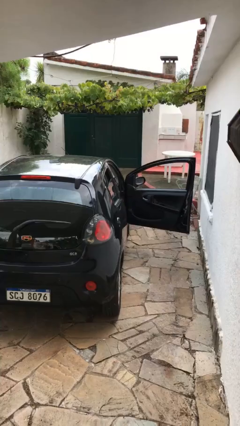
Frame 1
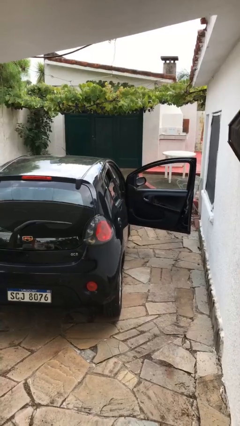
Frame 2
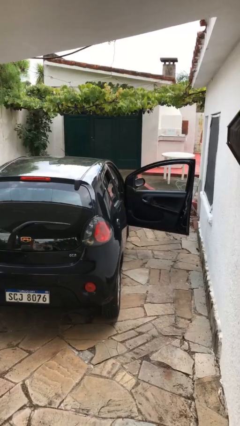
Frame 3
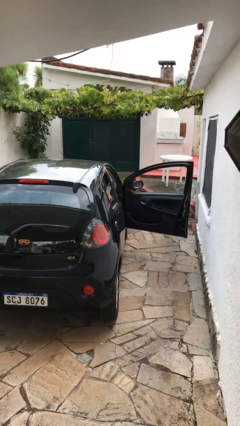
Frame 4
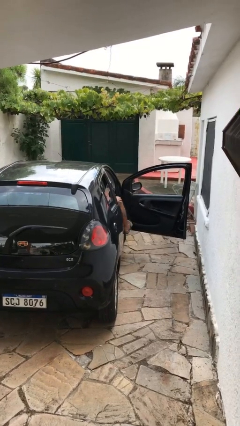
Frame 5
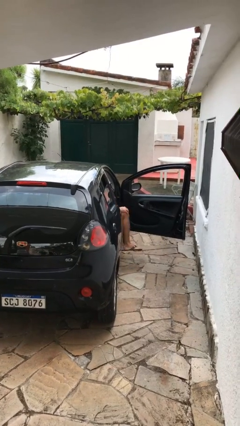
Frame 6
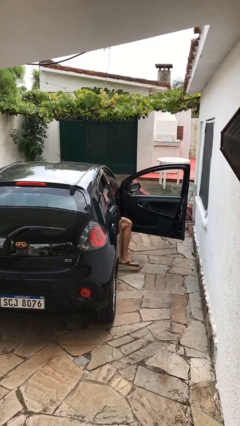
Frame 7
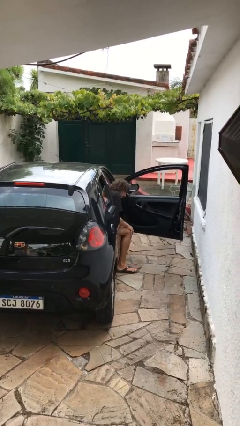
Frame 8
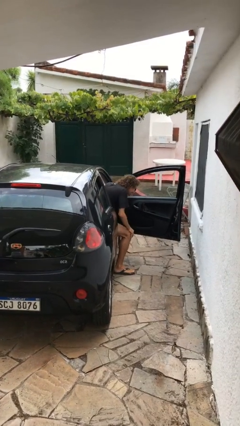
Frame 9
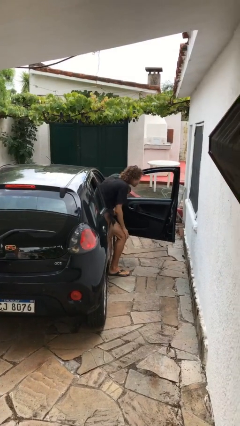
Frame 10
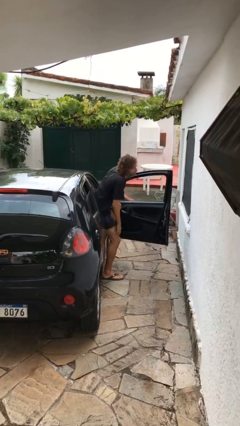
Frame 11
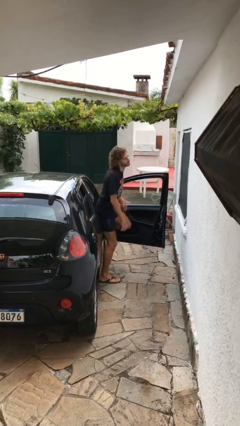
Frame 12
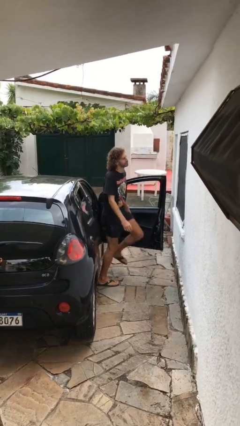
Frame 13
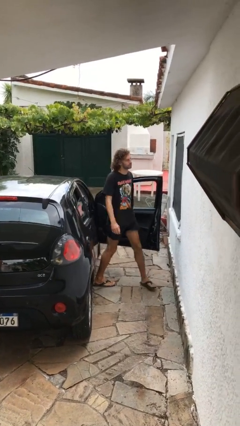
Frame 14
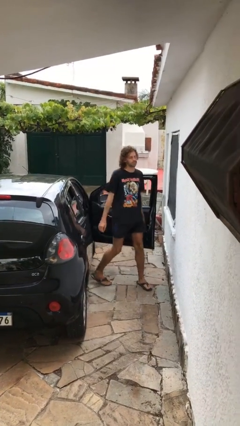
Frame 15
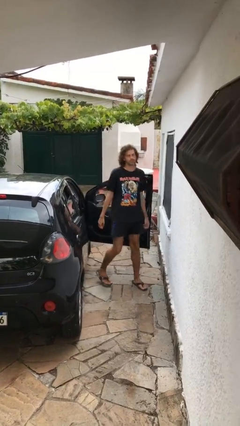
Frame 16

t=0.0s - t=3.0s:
person exits car

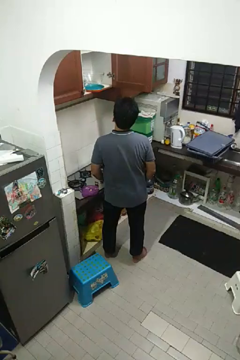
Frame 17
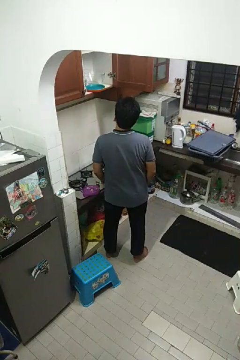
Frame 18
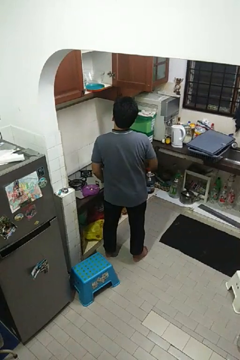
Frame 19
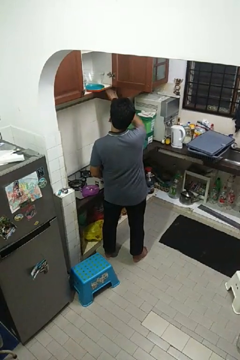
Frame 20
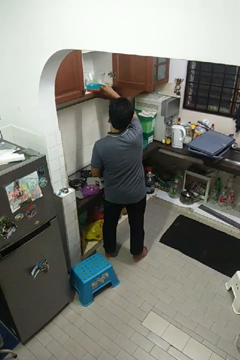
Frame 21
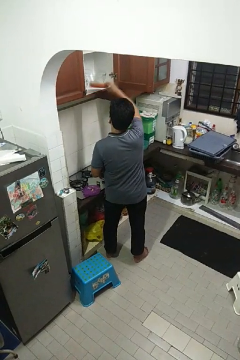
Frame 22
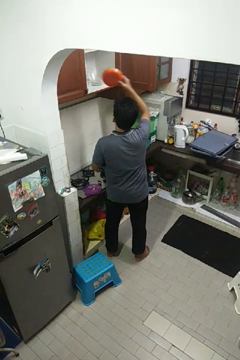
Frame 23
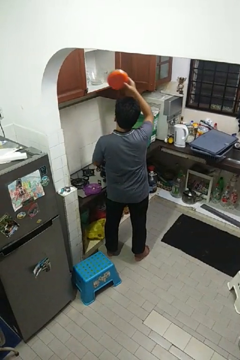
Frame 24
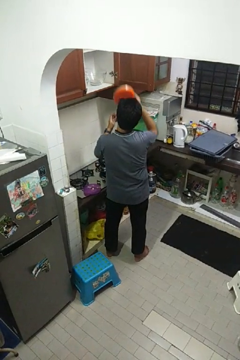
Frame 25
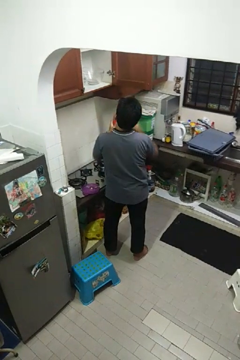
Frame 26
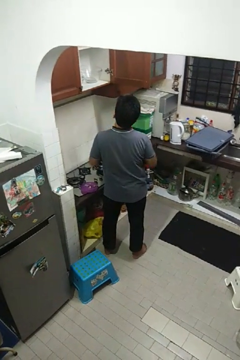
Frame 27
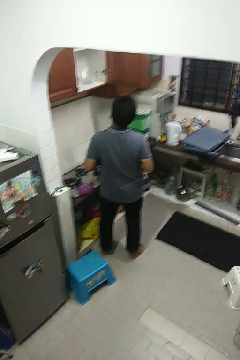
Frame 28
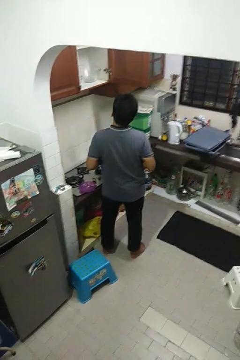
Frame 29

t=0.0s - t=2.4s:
person takes object from cabinet

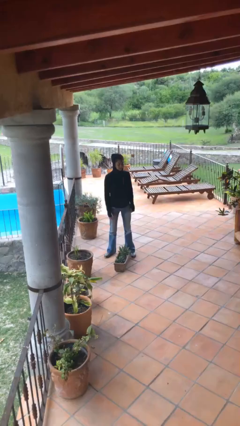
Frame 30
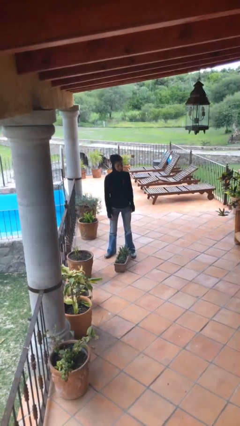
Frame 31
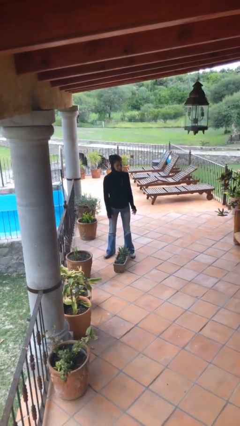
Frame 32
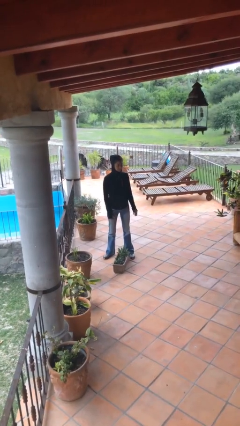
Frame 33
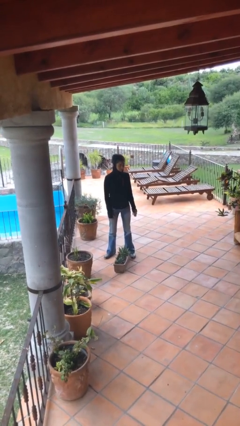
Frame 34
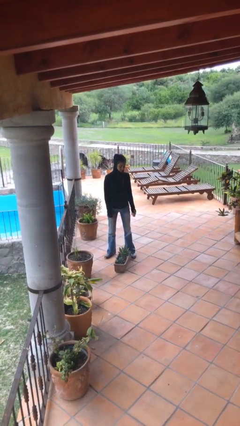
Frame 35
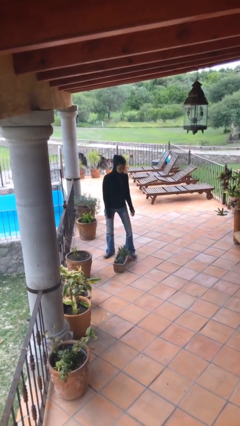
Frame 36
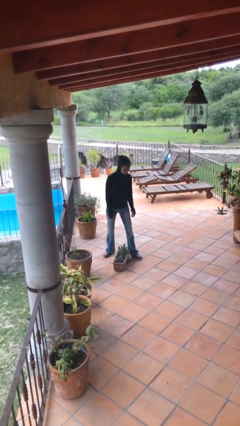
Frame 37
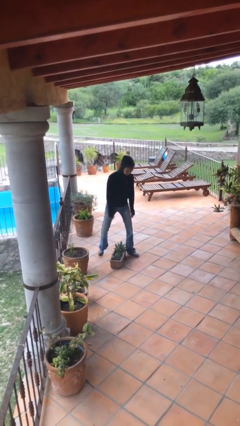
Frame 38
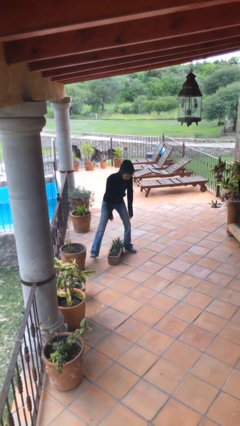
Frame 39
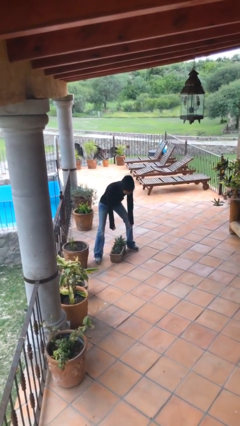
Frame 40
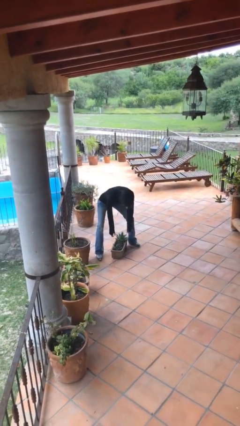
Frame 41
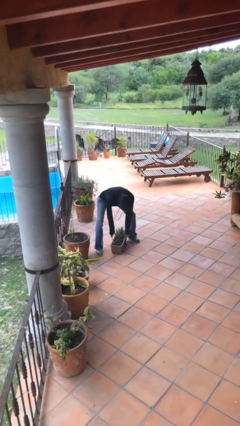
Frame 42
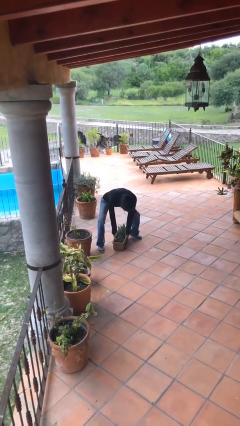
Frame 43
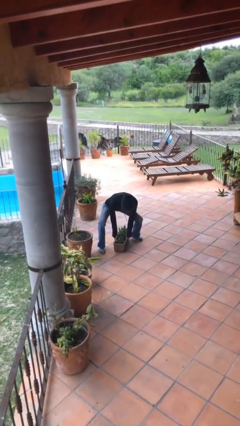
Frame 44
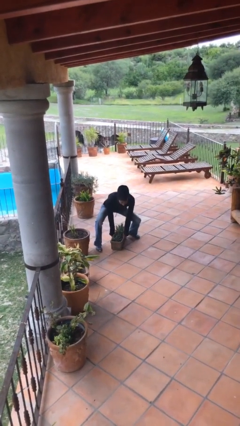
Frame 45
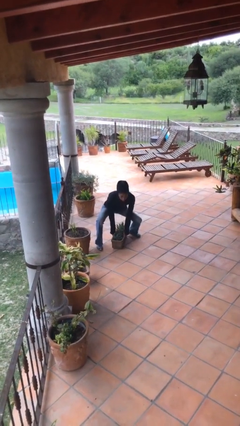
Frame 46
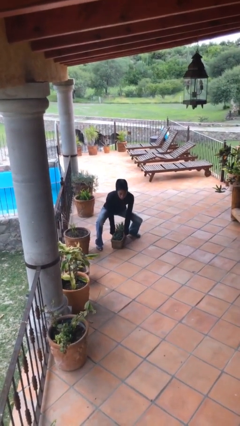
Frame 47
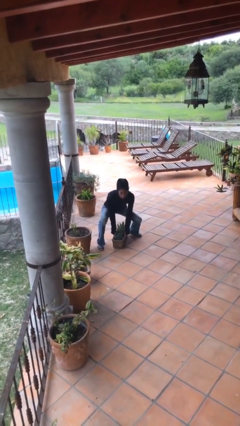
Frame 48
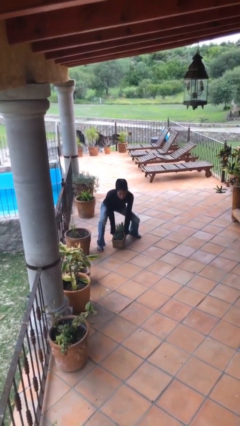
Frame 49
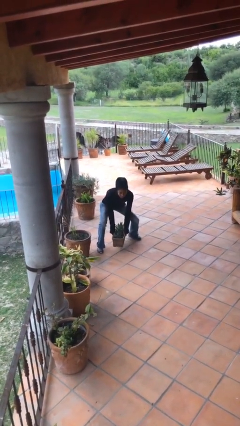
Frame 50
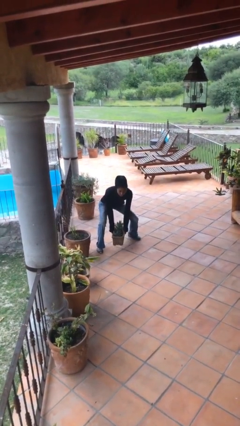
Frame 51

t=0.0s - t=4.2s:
person picks up object from floor

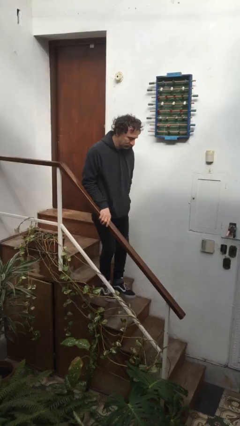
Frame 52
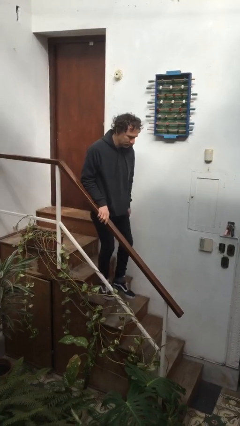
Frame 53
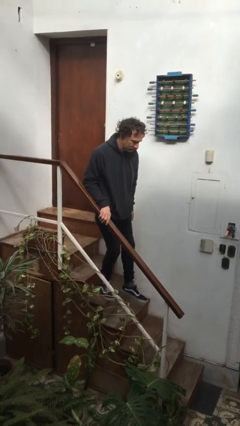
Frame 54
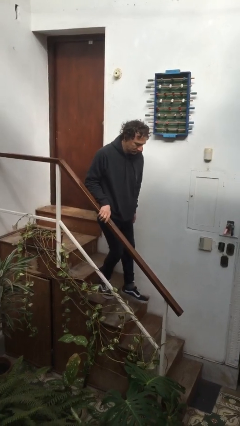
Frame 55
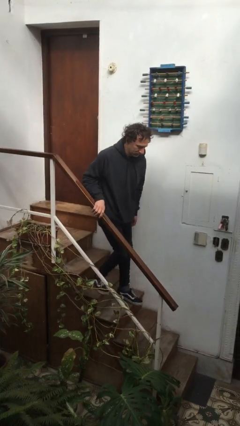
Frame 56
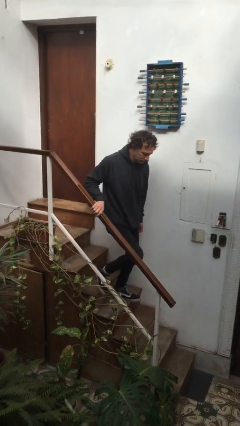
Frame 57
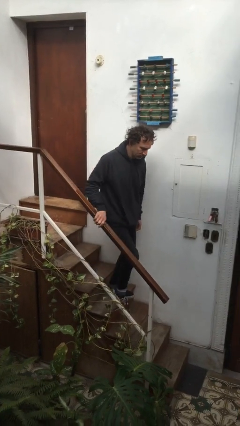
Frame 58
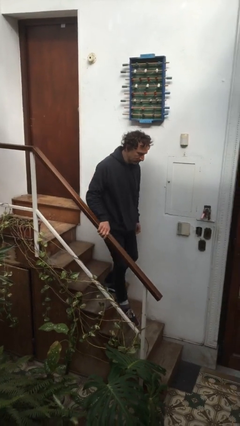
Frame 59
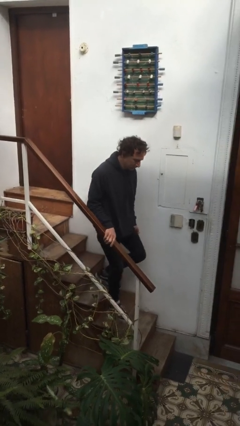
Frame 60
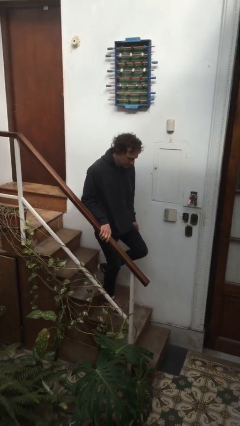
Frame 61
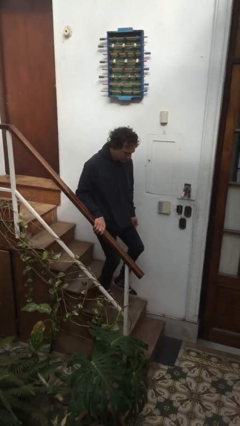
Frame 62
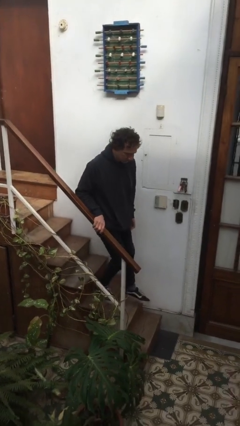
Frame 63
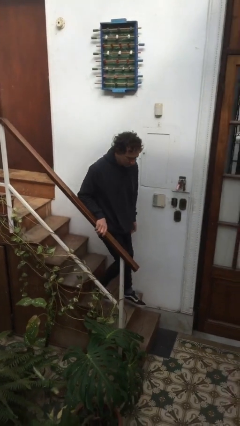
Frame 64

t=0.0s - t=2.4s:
person climbs down stairs

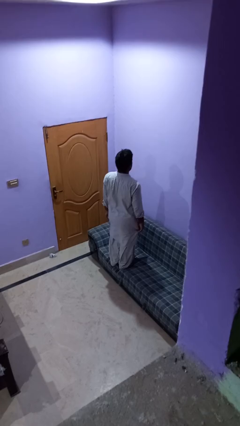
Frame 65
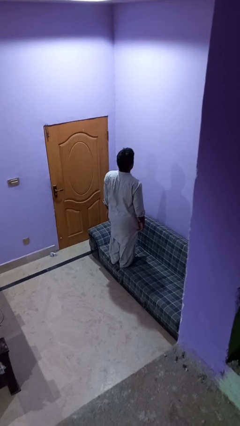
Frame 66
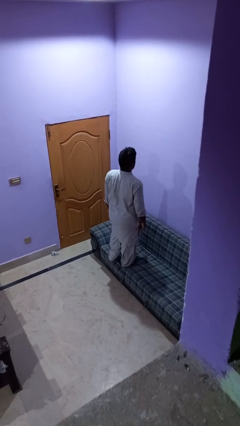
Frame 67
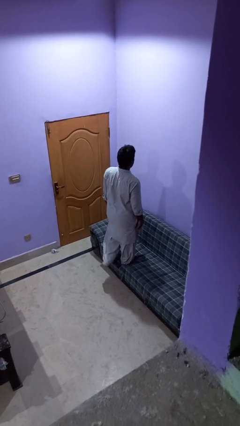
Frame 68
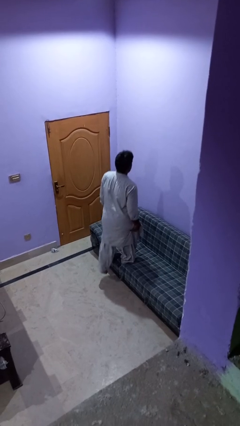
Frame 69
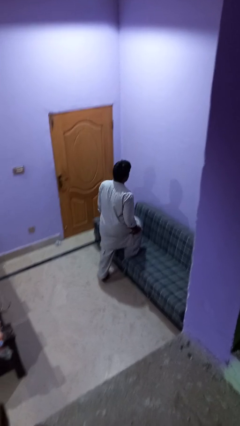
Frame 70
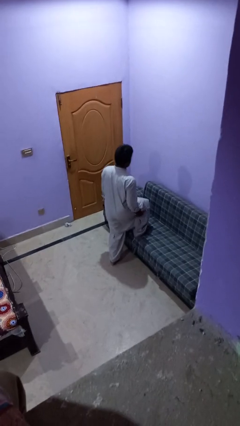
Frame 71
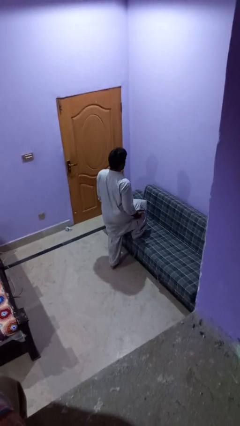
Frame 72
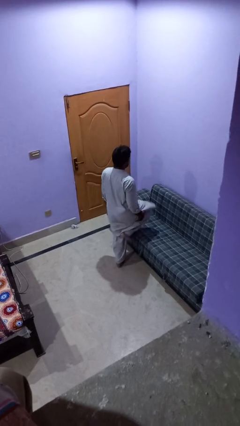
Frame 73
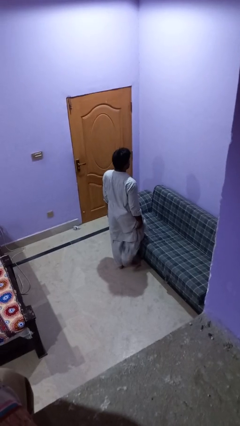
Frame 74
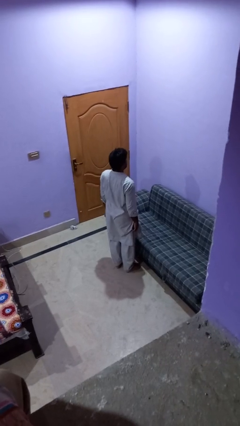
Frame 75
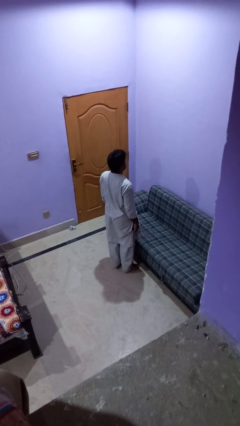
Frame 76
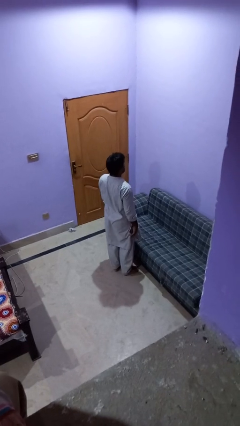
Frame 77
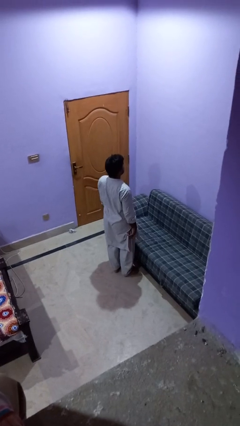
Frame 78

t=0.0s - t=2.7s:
person climbs off couch

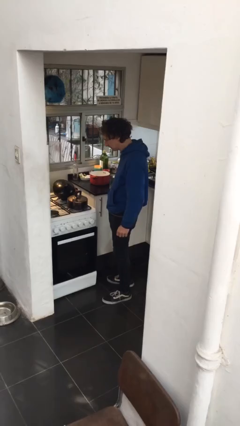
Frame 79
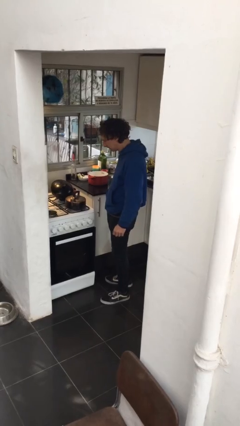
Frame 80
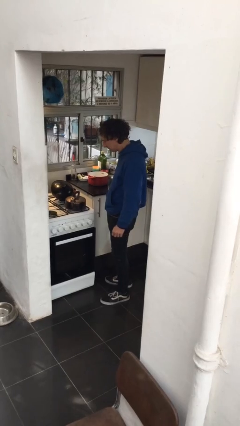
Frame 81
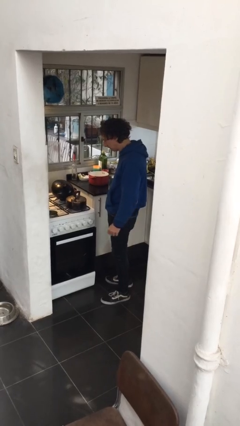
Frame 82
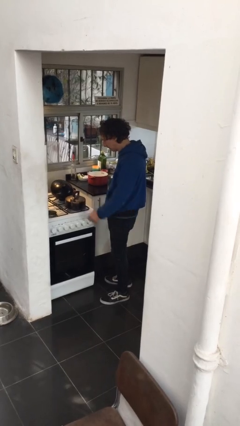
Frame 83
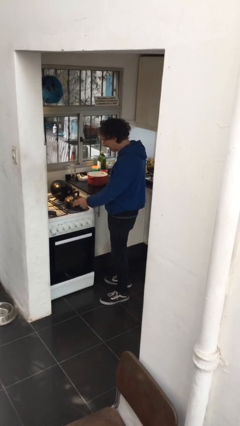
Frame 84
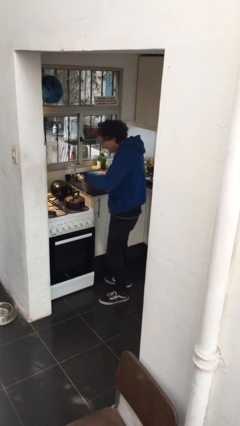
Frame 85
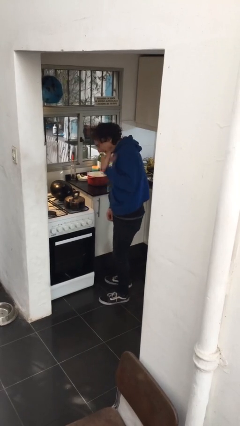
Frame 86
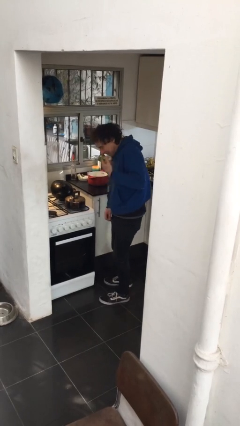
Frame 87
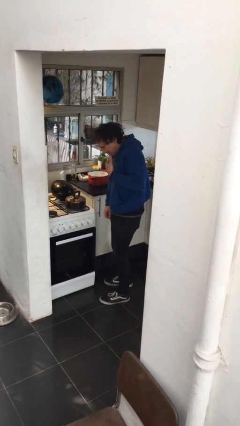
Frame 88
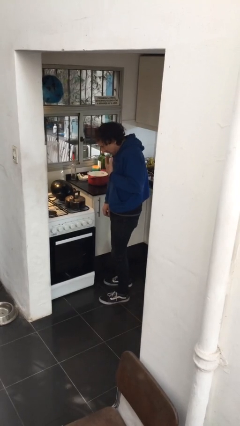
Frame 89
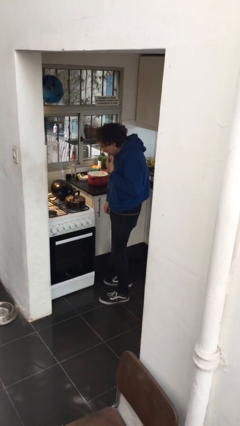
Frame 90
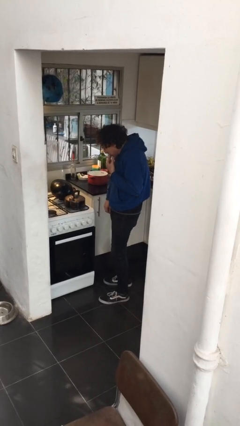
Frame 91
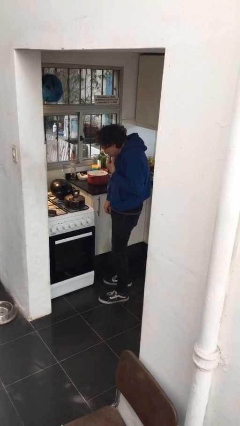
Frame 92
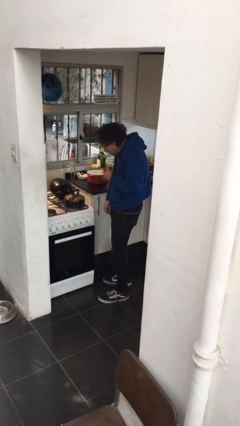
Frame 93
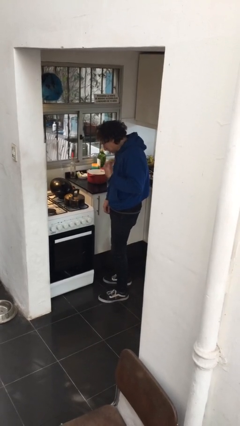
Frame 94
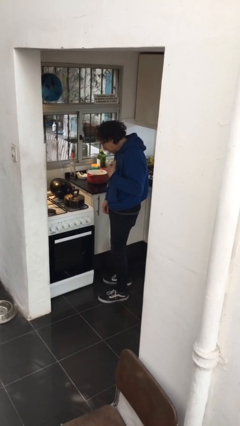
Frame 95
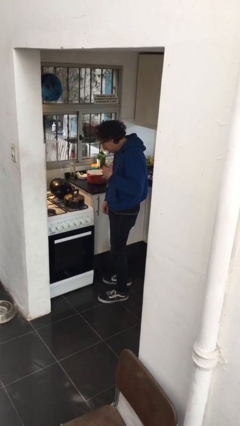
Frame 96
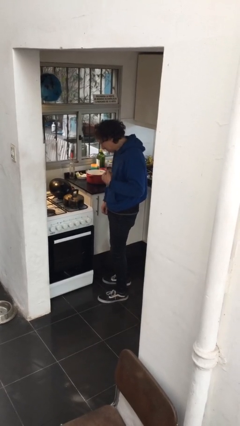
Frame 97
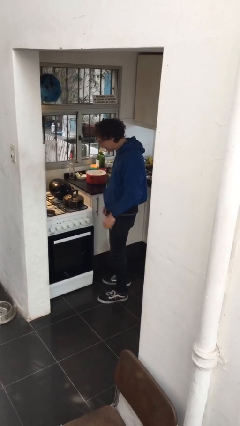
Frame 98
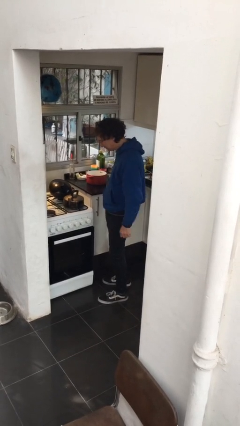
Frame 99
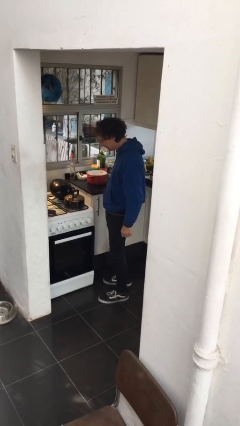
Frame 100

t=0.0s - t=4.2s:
person burns hand
